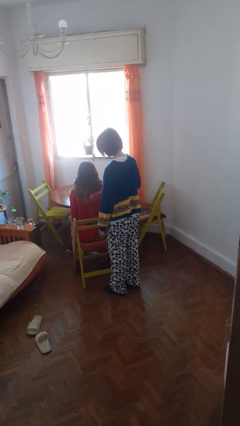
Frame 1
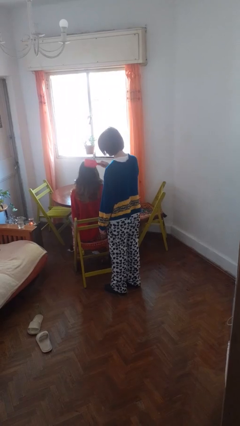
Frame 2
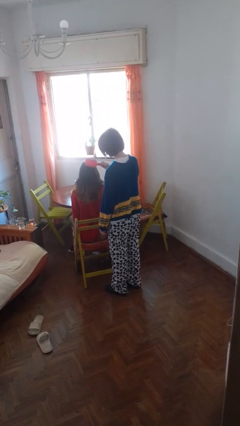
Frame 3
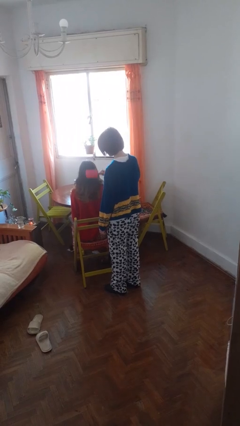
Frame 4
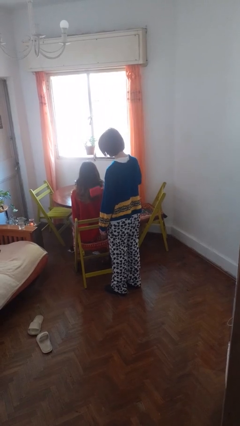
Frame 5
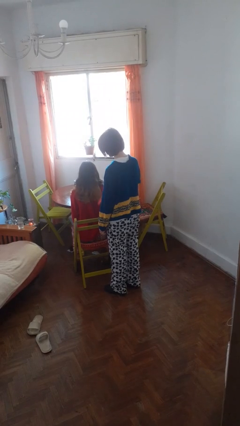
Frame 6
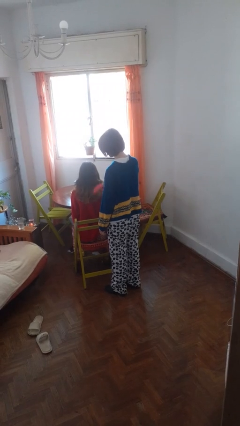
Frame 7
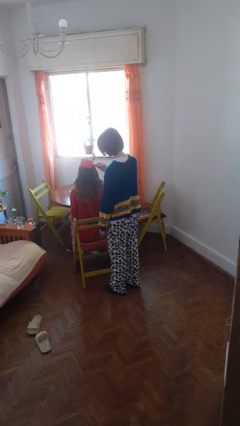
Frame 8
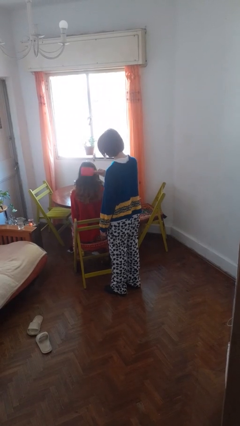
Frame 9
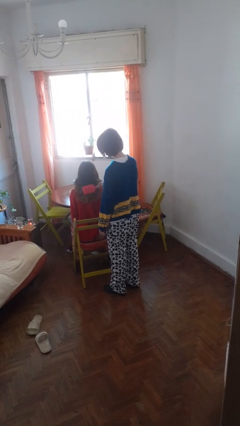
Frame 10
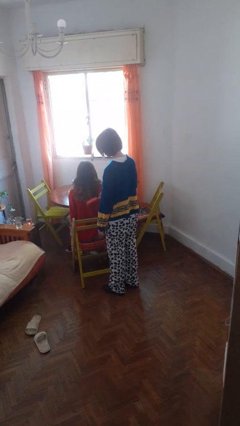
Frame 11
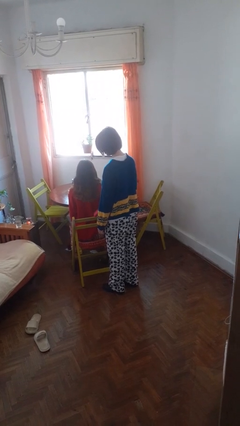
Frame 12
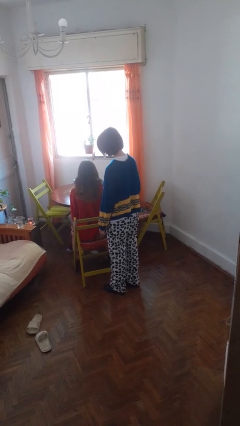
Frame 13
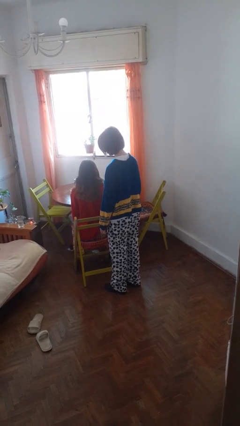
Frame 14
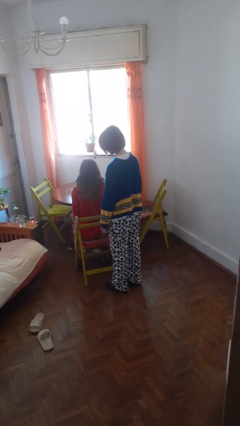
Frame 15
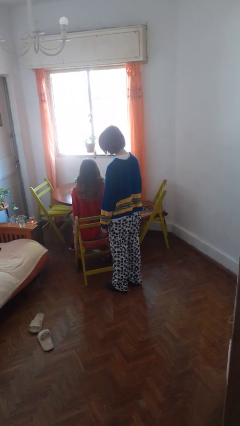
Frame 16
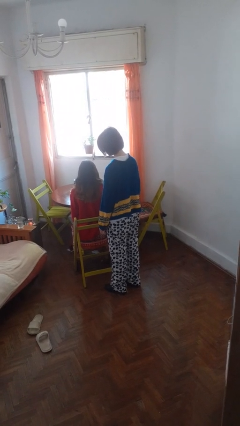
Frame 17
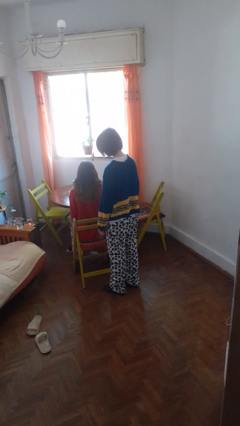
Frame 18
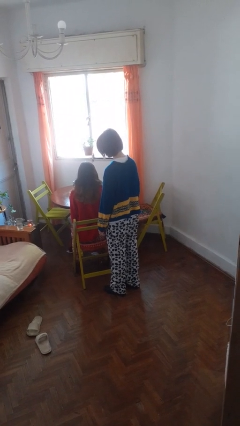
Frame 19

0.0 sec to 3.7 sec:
person brushes hair of person

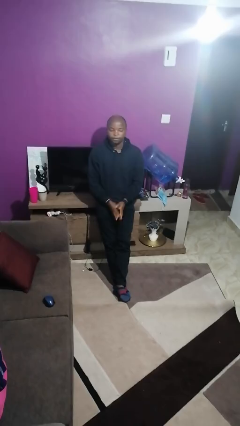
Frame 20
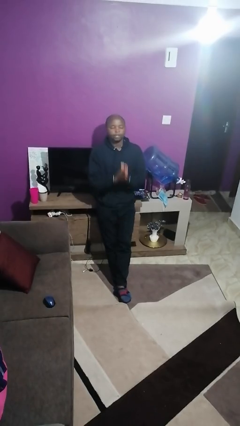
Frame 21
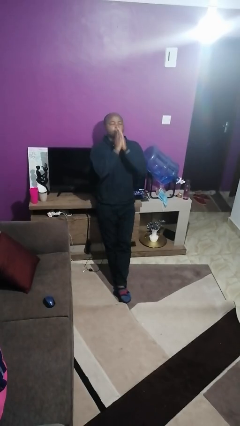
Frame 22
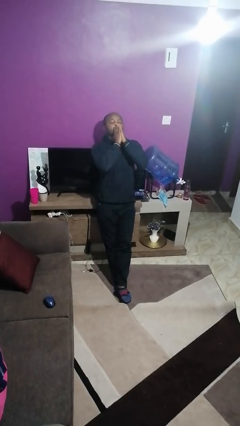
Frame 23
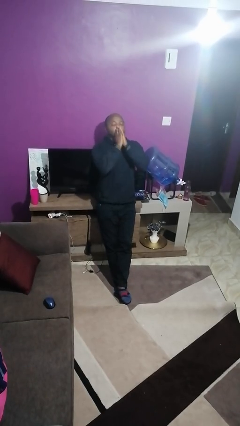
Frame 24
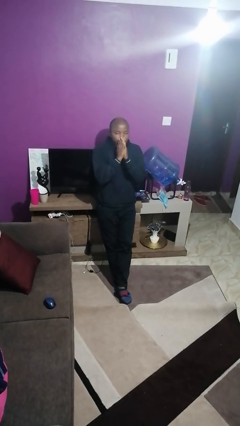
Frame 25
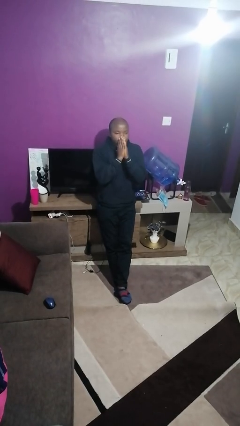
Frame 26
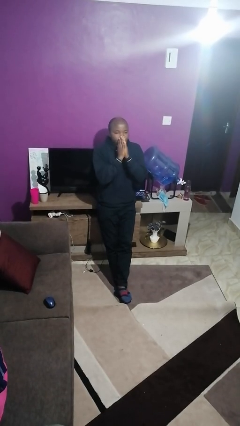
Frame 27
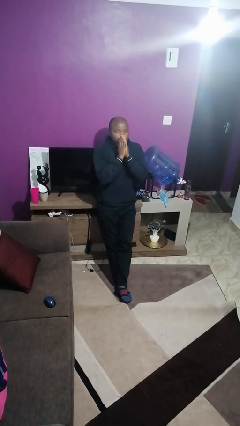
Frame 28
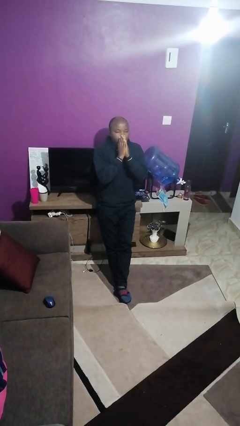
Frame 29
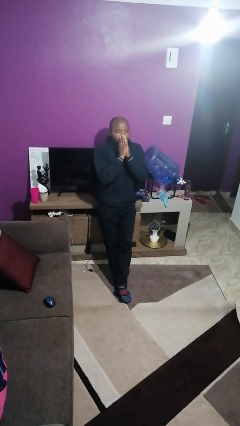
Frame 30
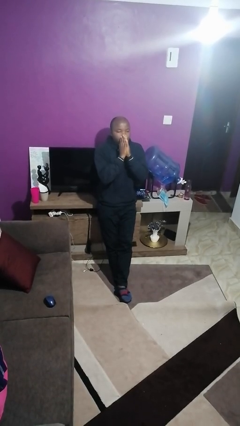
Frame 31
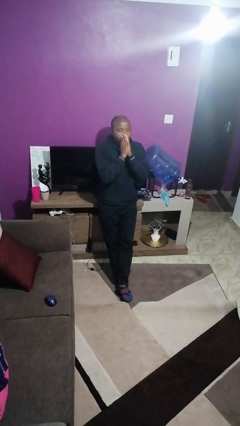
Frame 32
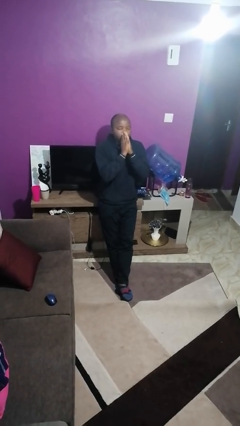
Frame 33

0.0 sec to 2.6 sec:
person sneezes into hand

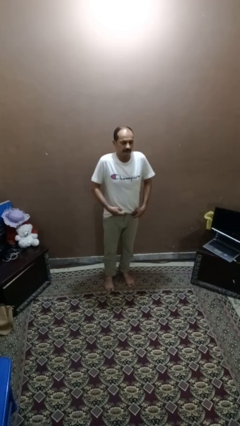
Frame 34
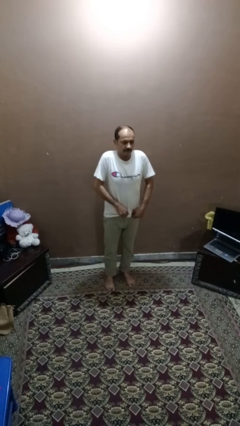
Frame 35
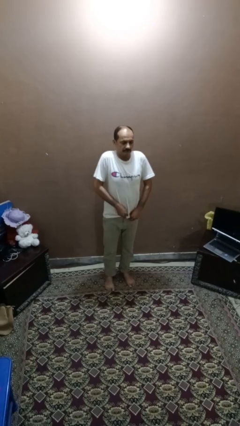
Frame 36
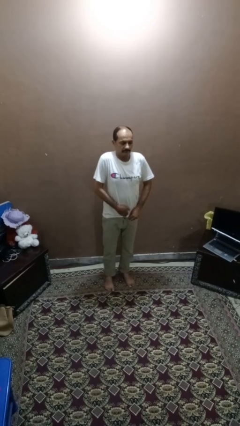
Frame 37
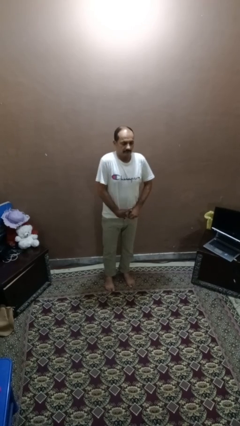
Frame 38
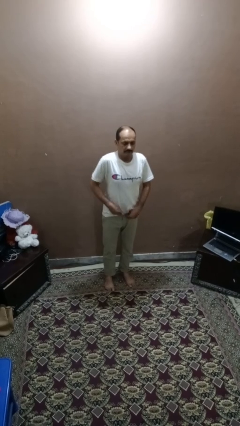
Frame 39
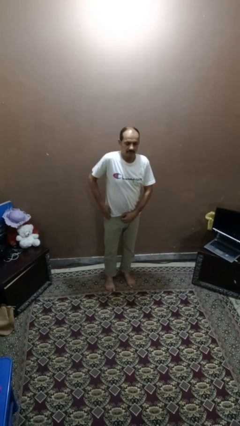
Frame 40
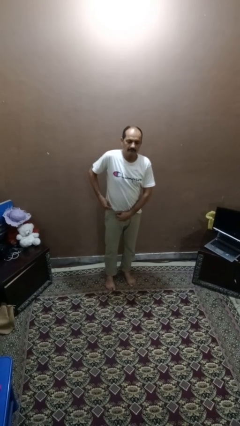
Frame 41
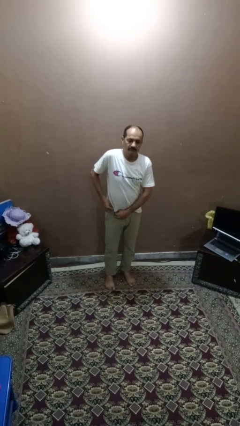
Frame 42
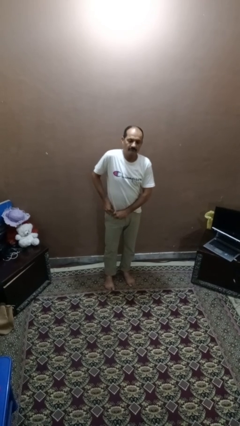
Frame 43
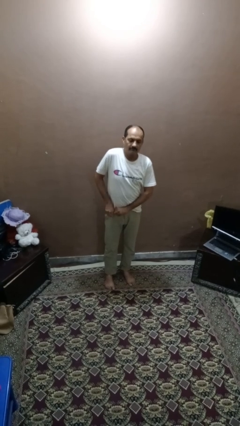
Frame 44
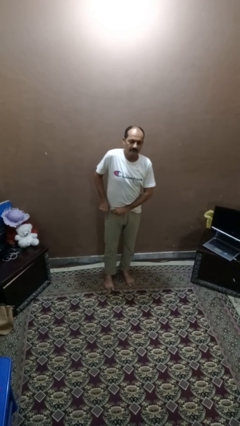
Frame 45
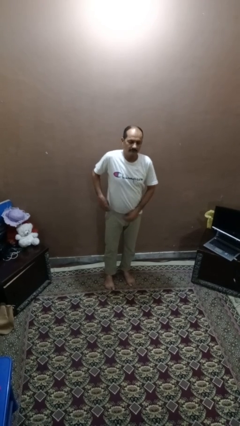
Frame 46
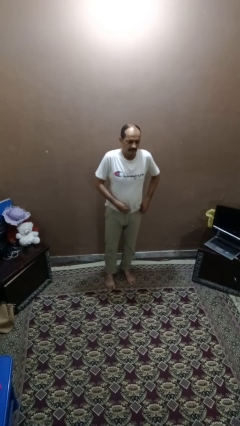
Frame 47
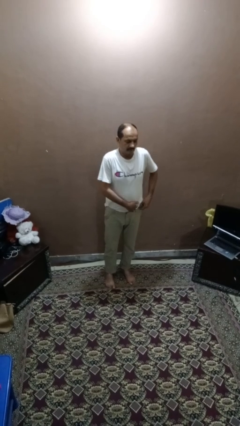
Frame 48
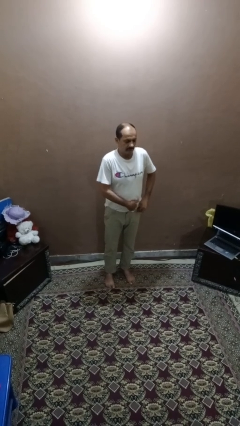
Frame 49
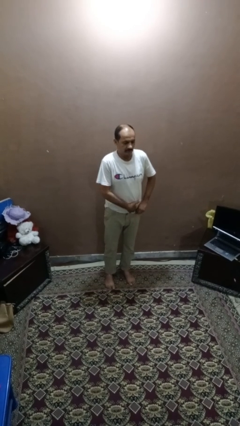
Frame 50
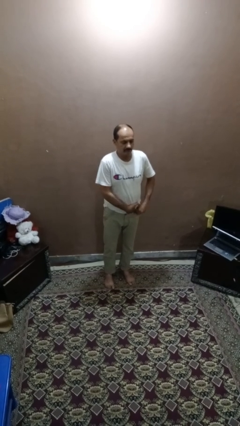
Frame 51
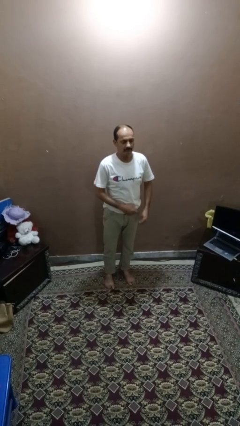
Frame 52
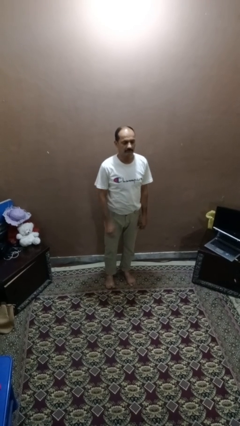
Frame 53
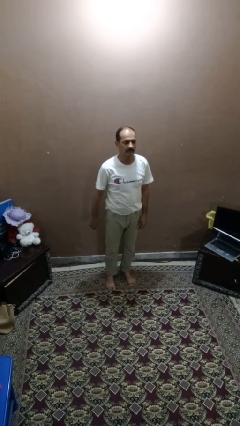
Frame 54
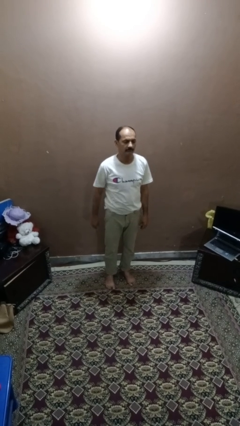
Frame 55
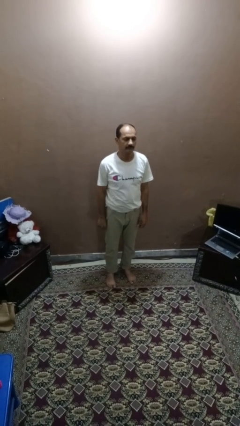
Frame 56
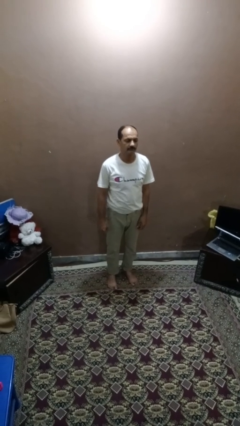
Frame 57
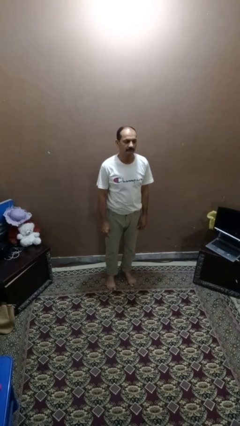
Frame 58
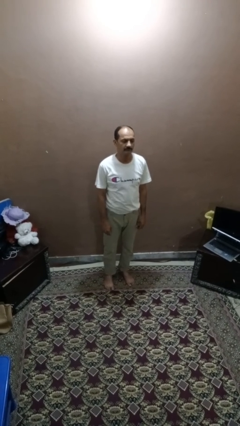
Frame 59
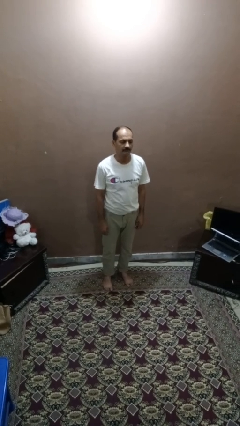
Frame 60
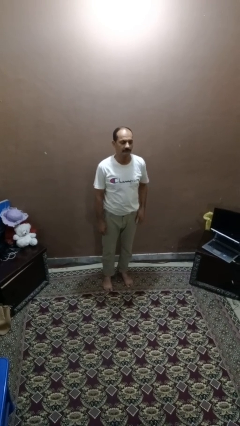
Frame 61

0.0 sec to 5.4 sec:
person tucks in shirt

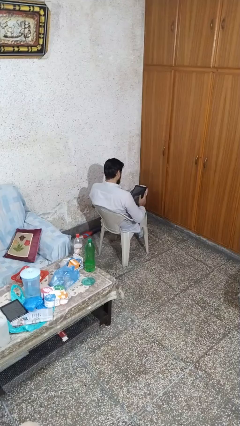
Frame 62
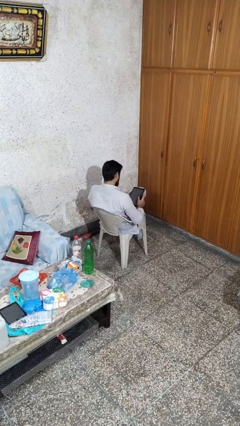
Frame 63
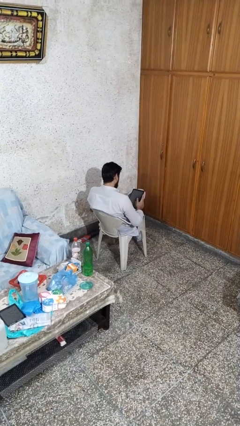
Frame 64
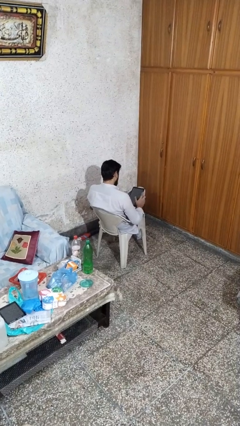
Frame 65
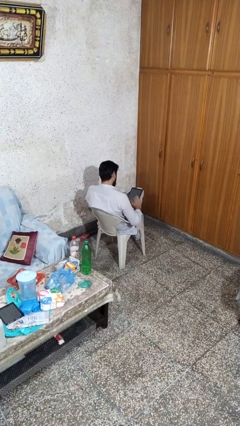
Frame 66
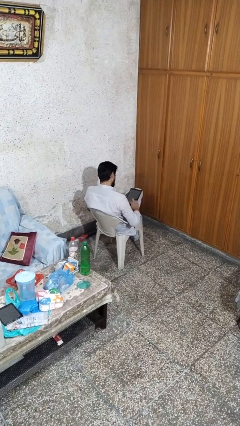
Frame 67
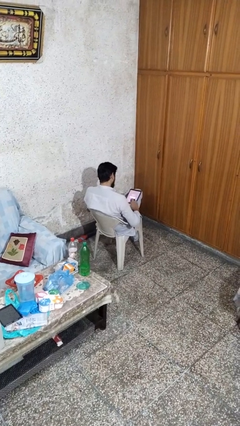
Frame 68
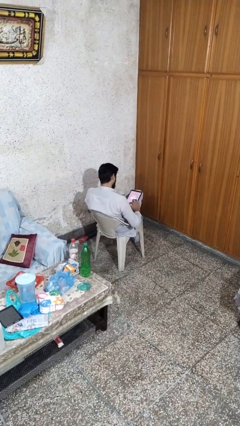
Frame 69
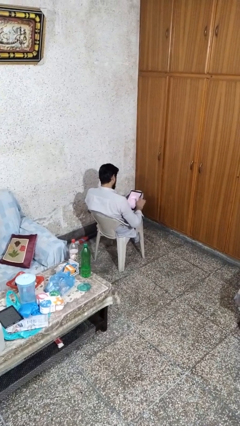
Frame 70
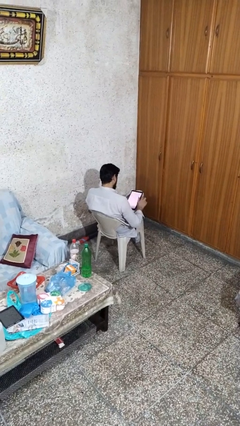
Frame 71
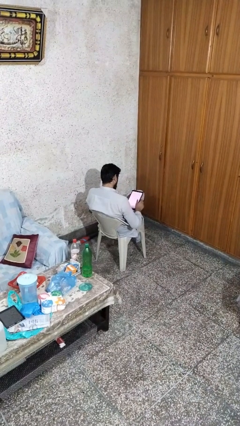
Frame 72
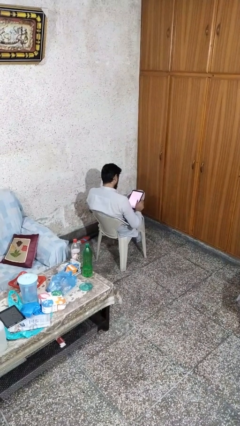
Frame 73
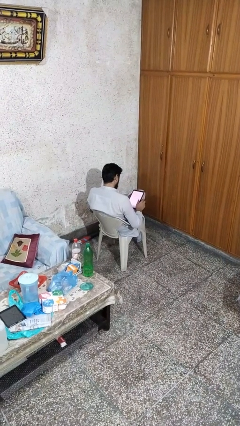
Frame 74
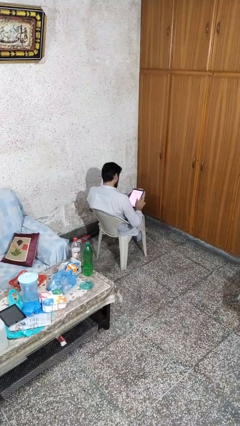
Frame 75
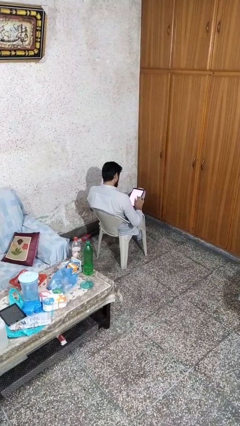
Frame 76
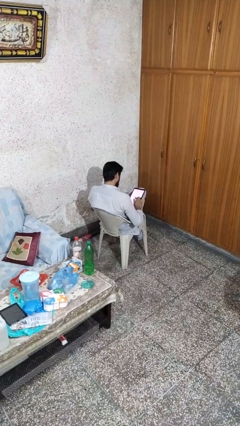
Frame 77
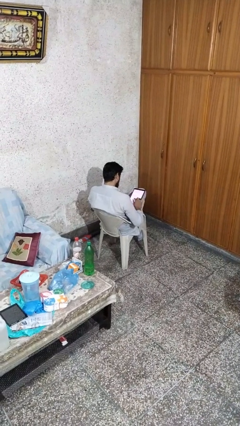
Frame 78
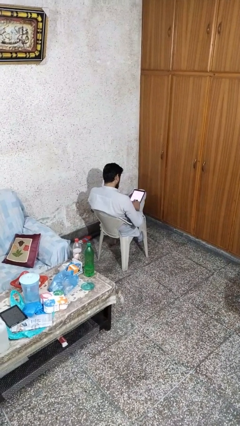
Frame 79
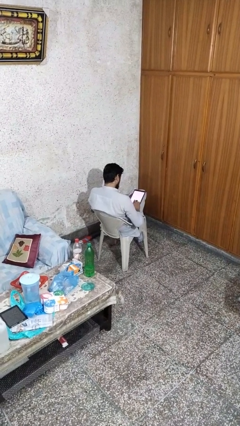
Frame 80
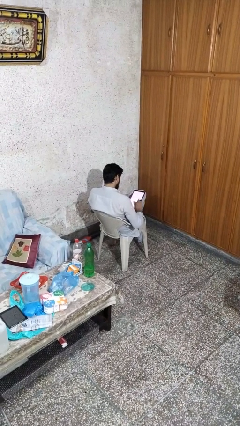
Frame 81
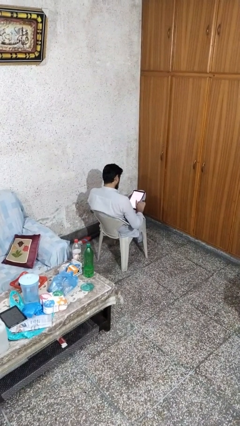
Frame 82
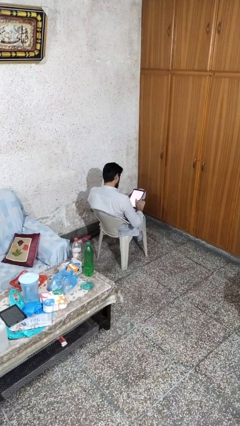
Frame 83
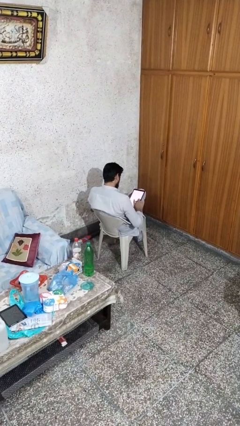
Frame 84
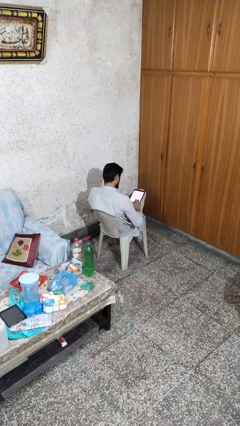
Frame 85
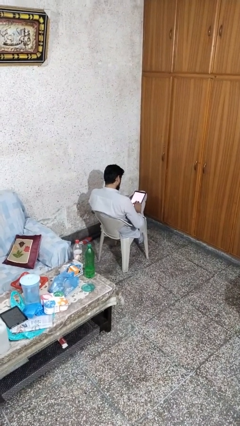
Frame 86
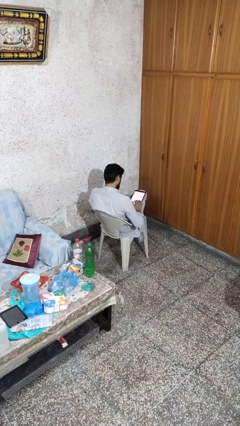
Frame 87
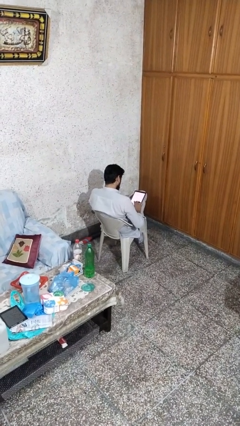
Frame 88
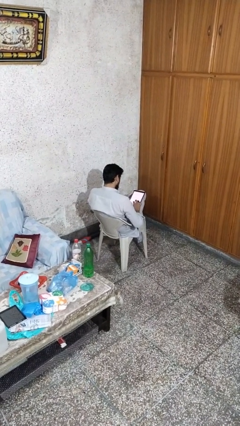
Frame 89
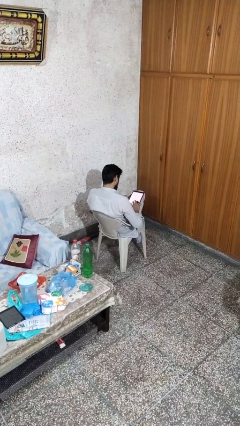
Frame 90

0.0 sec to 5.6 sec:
person interacts with tablet

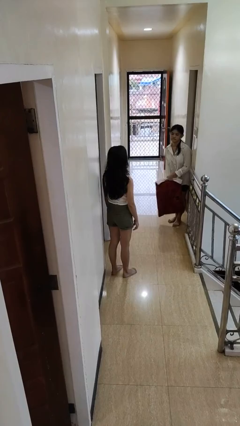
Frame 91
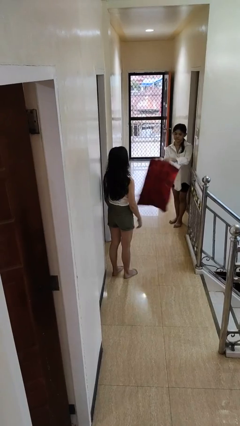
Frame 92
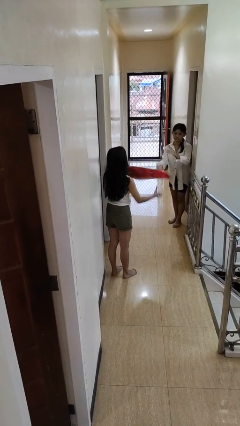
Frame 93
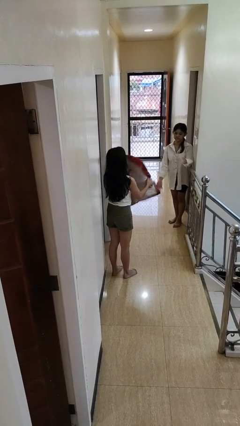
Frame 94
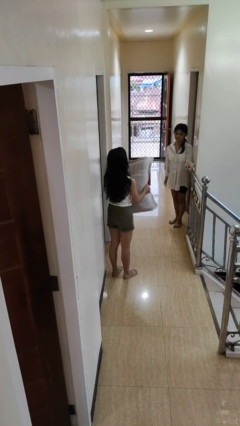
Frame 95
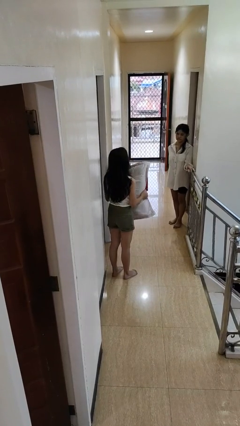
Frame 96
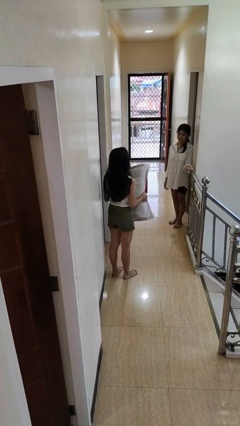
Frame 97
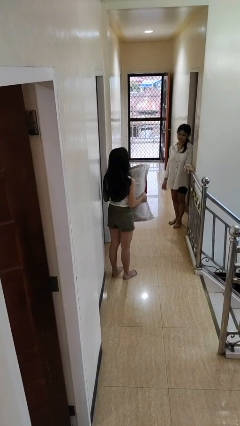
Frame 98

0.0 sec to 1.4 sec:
person catches object from person
